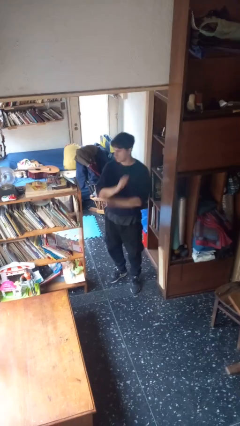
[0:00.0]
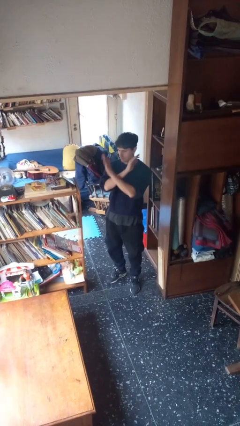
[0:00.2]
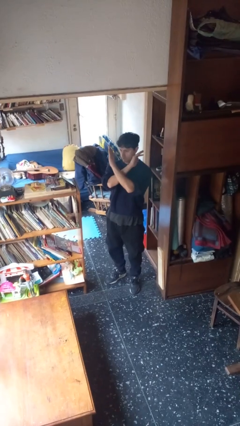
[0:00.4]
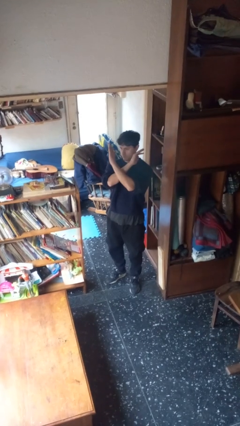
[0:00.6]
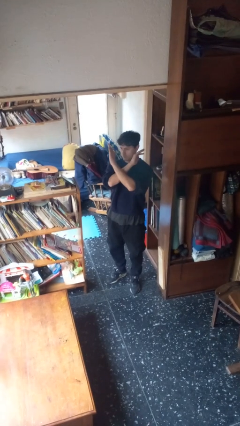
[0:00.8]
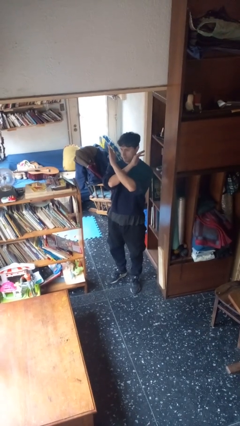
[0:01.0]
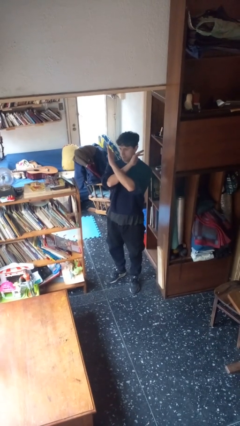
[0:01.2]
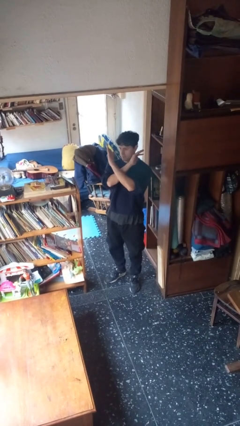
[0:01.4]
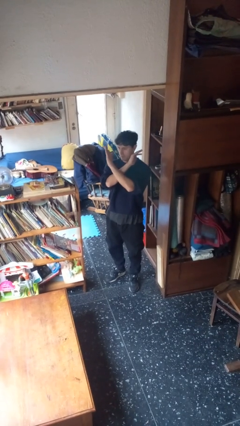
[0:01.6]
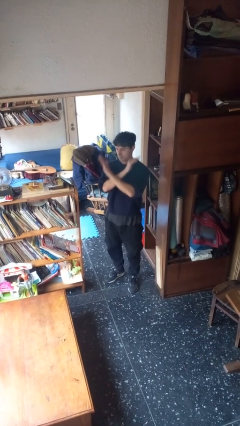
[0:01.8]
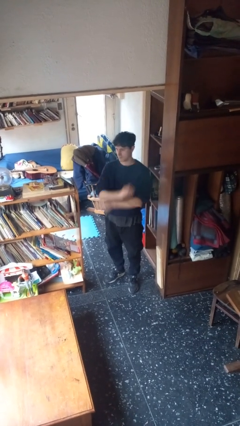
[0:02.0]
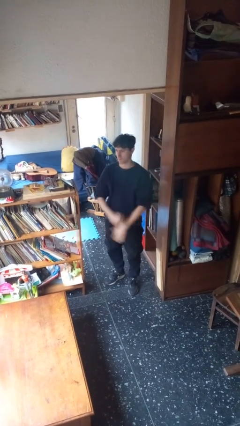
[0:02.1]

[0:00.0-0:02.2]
person gestures arms x

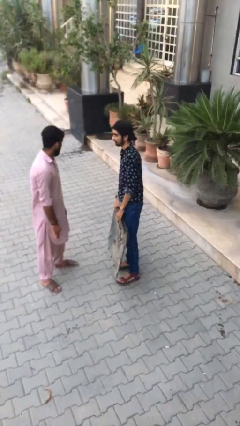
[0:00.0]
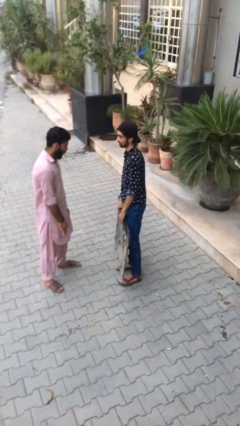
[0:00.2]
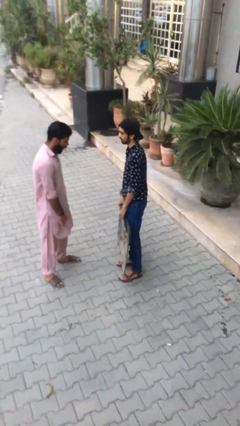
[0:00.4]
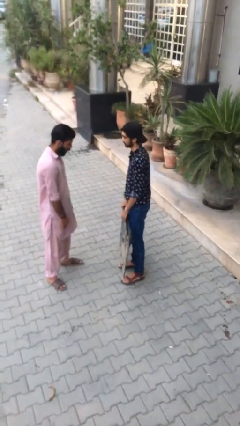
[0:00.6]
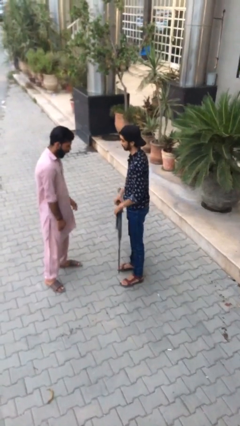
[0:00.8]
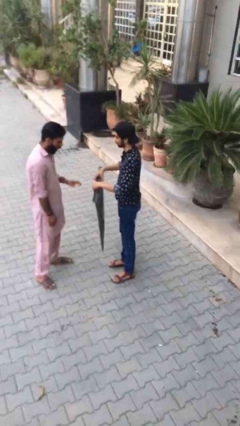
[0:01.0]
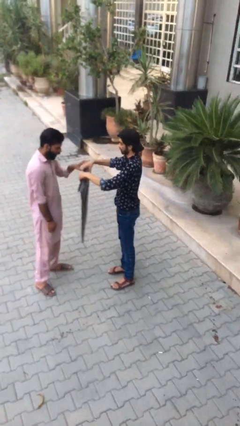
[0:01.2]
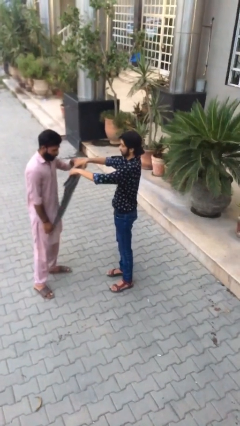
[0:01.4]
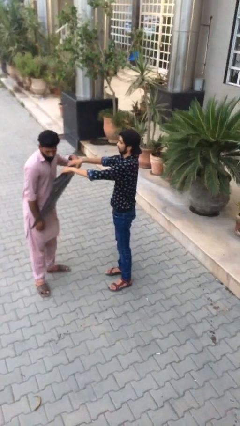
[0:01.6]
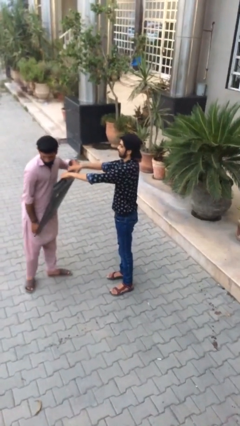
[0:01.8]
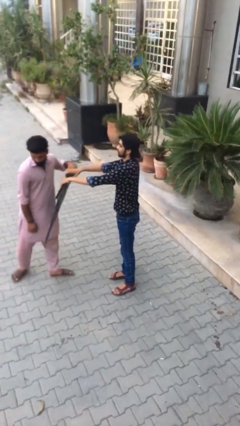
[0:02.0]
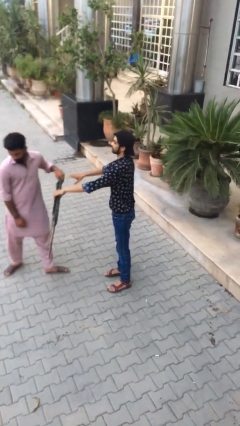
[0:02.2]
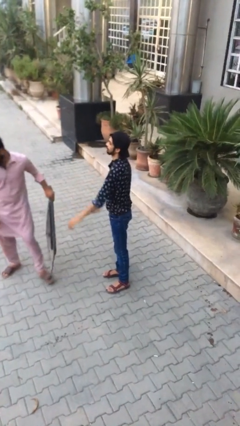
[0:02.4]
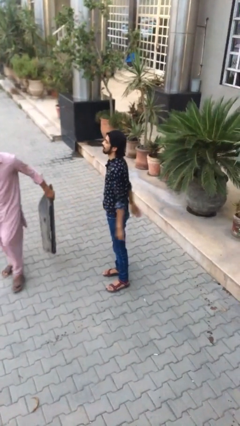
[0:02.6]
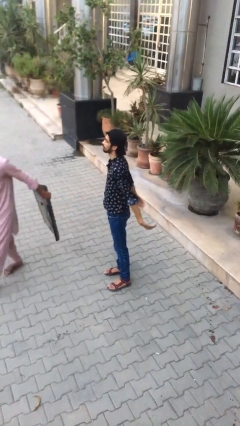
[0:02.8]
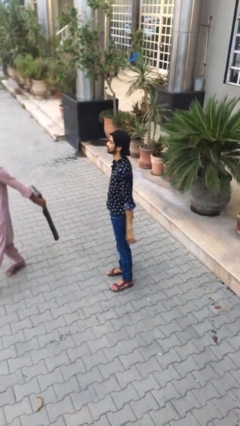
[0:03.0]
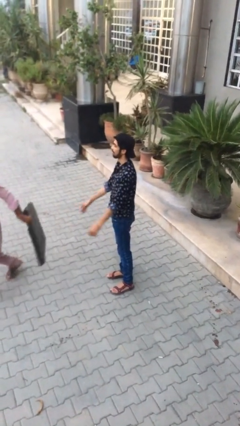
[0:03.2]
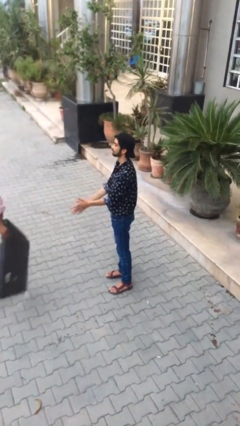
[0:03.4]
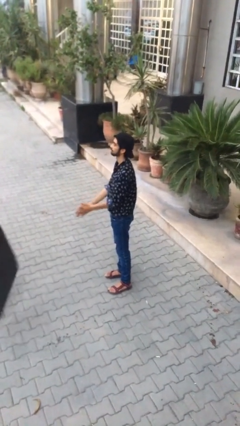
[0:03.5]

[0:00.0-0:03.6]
person transfers object to person

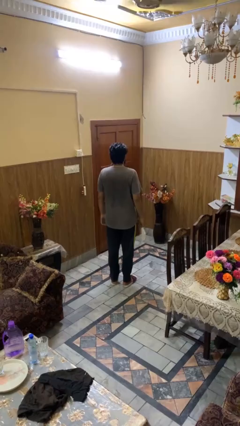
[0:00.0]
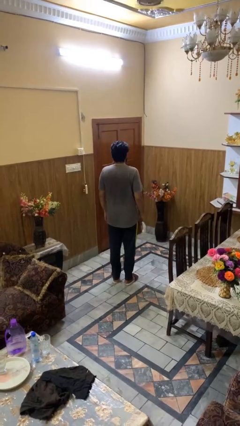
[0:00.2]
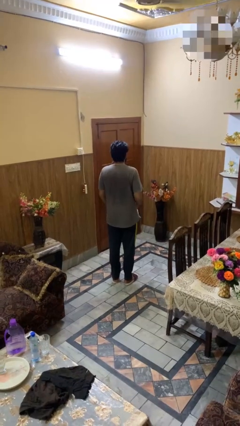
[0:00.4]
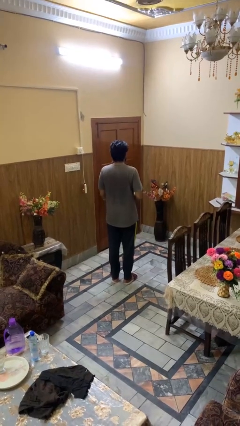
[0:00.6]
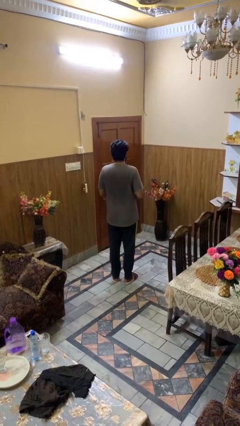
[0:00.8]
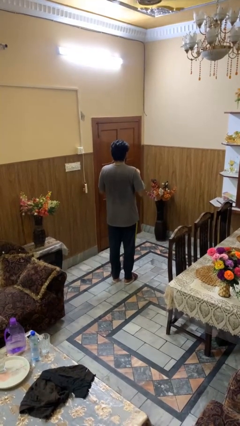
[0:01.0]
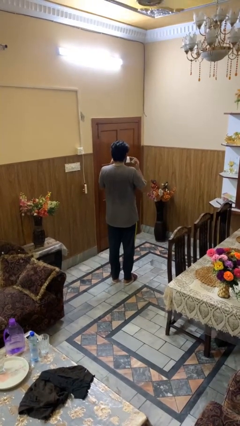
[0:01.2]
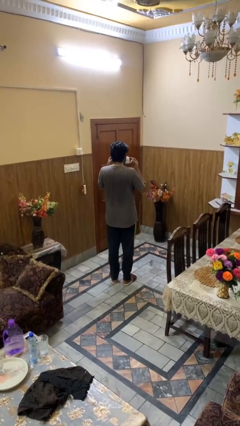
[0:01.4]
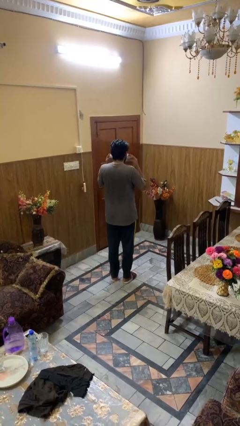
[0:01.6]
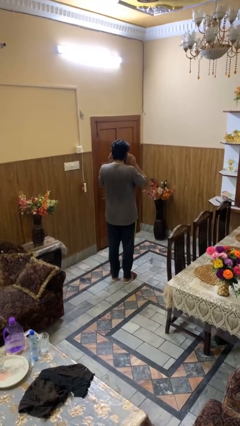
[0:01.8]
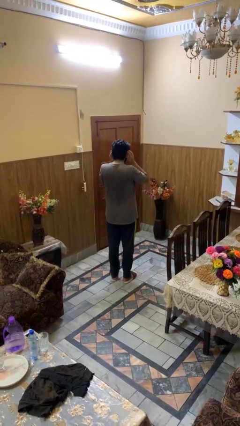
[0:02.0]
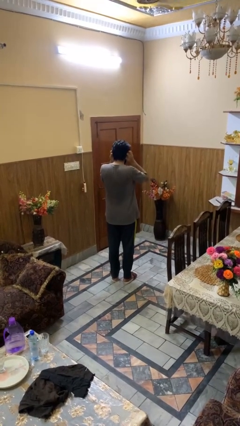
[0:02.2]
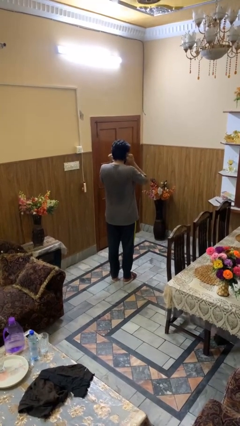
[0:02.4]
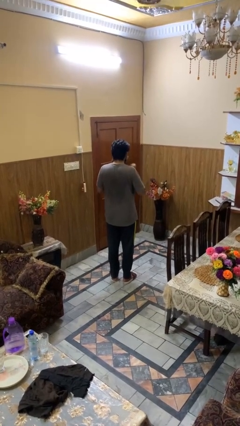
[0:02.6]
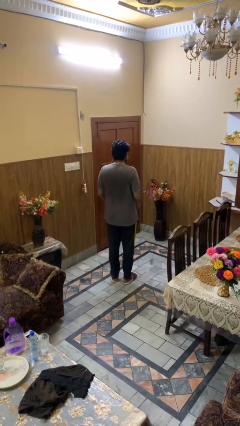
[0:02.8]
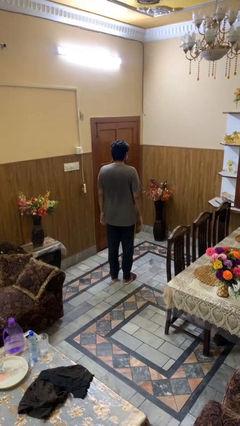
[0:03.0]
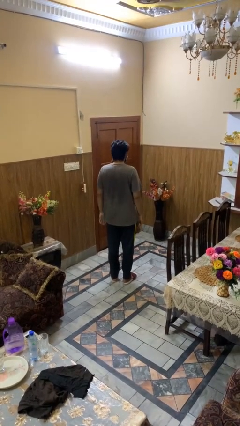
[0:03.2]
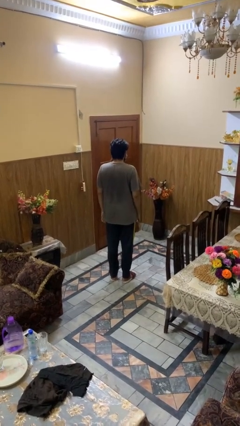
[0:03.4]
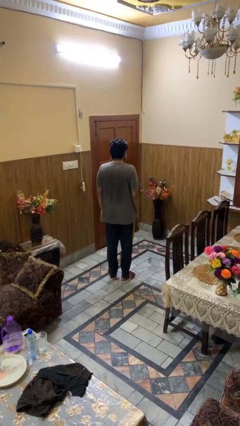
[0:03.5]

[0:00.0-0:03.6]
person puts on facemask

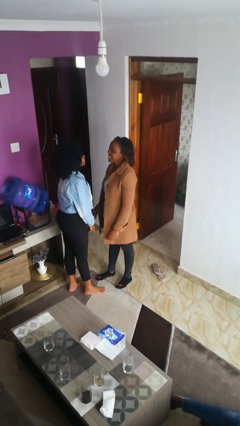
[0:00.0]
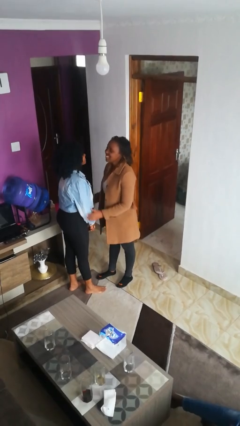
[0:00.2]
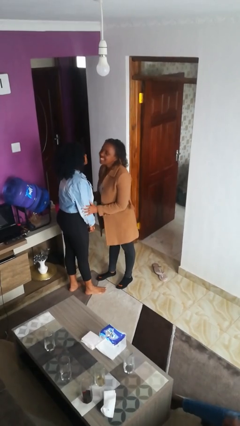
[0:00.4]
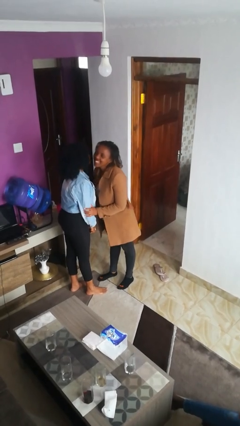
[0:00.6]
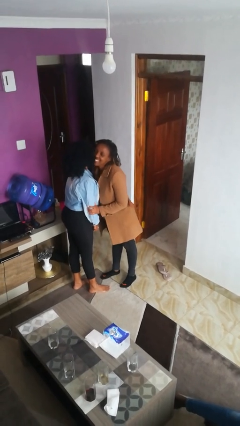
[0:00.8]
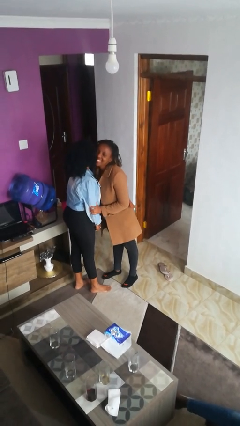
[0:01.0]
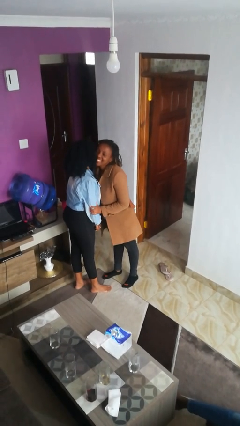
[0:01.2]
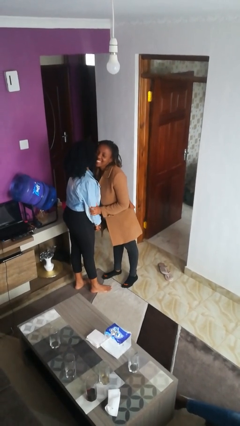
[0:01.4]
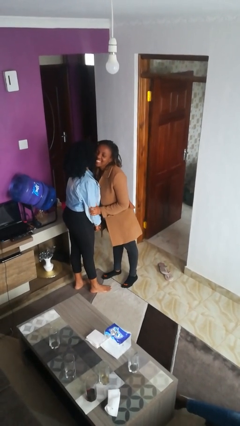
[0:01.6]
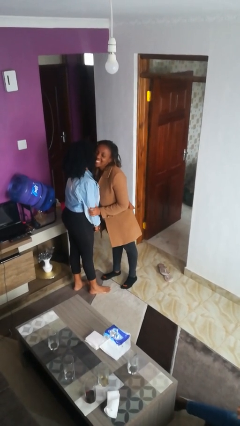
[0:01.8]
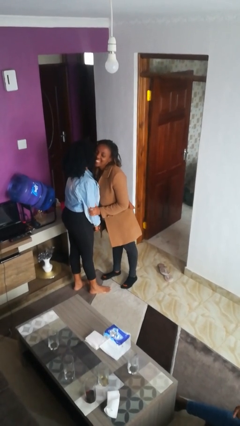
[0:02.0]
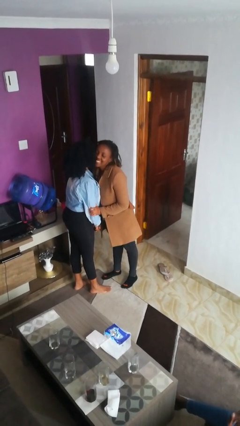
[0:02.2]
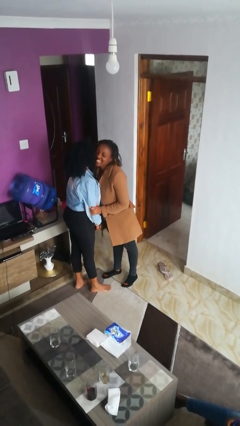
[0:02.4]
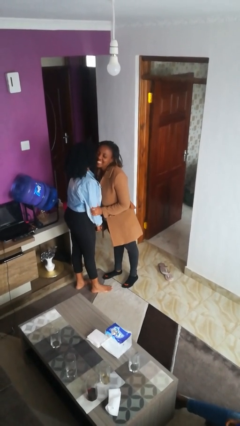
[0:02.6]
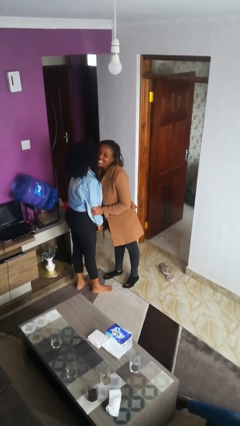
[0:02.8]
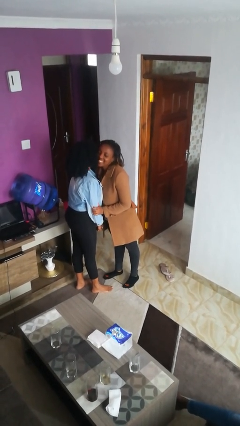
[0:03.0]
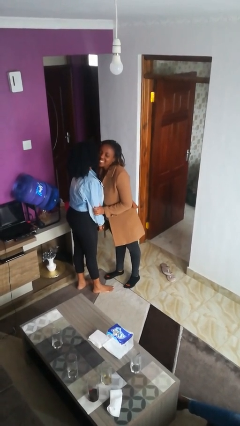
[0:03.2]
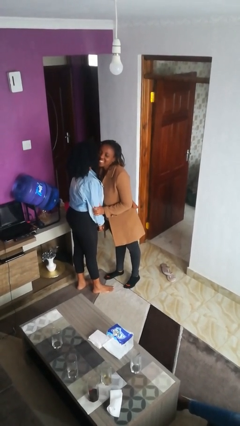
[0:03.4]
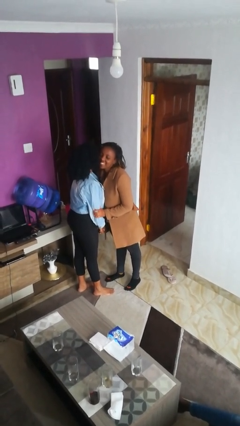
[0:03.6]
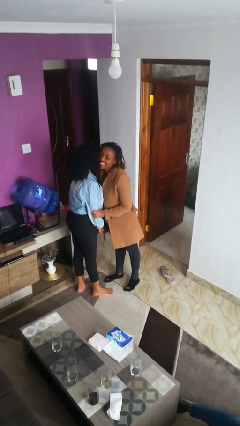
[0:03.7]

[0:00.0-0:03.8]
person kisses cheek of person

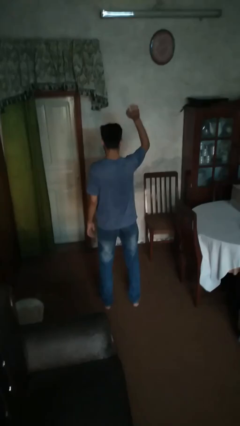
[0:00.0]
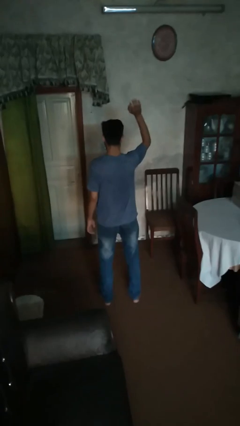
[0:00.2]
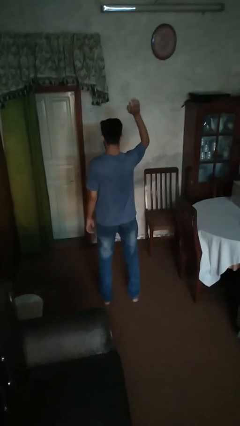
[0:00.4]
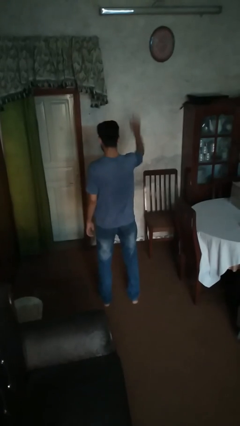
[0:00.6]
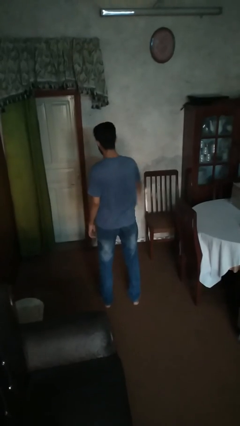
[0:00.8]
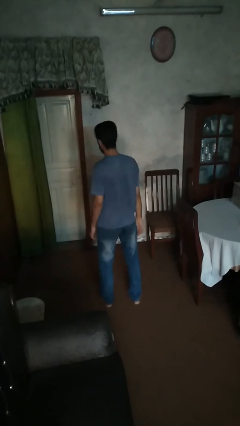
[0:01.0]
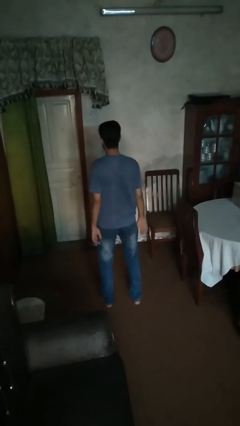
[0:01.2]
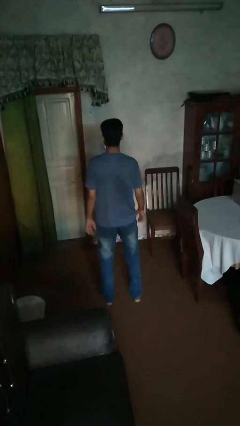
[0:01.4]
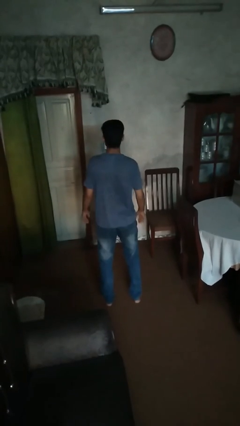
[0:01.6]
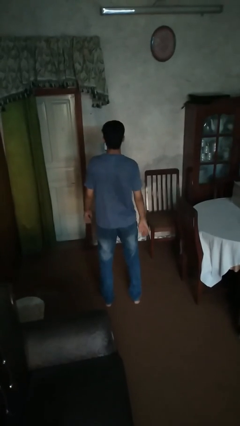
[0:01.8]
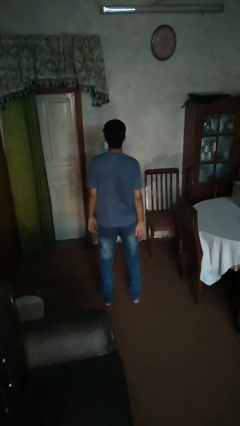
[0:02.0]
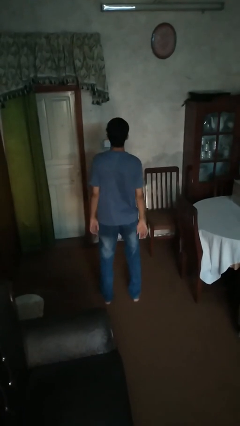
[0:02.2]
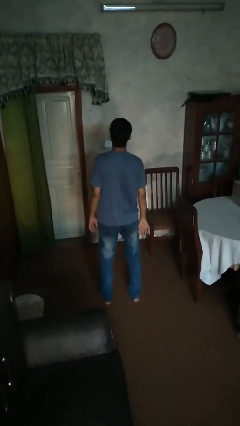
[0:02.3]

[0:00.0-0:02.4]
person gestures lower hand

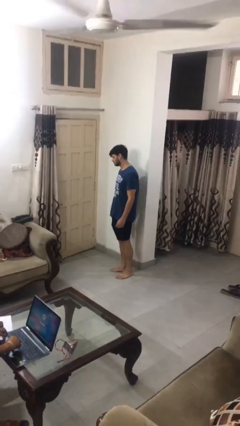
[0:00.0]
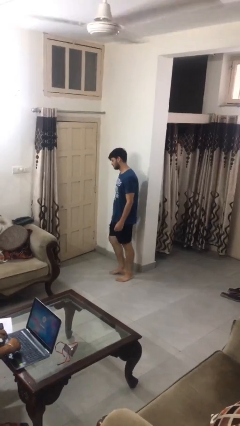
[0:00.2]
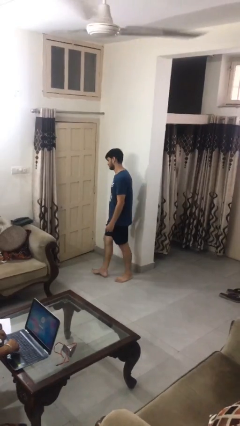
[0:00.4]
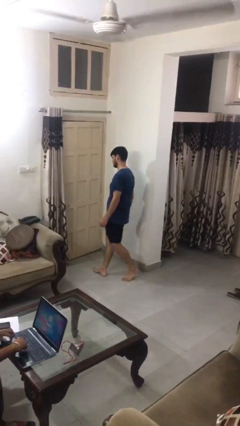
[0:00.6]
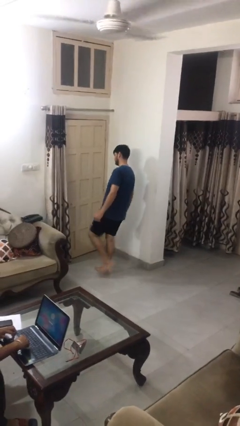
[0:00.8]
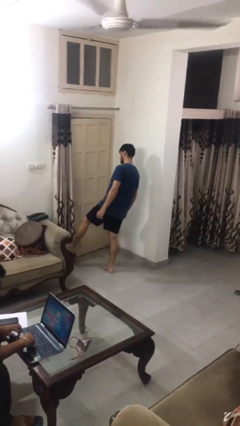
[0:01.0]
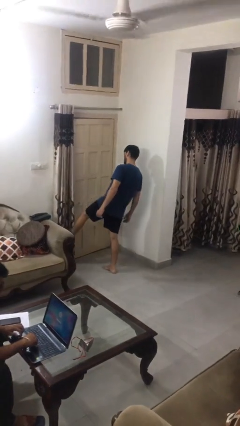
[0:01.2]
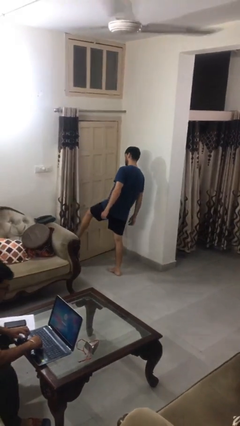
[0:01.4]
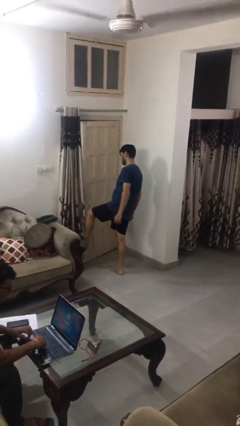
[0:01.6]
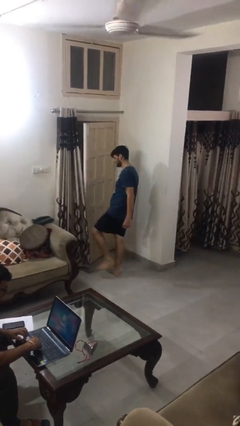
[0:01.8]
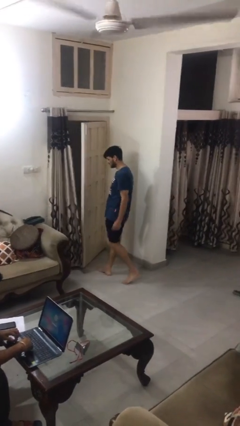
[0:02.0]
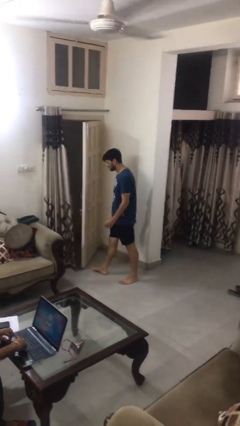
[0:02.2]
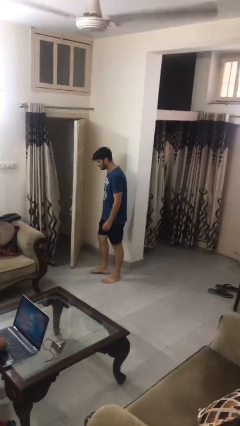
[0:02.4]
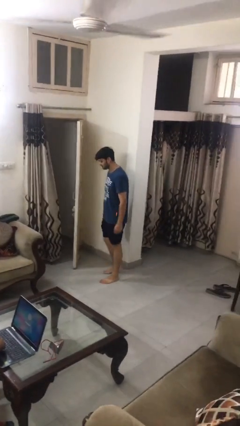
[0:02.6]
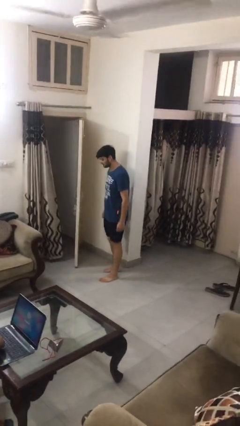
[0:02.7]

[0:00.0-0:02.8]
person opens facility door
